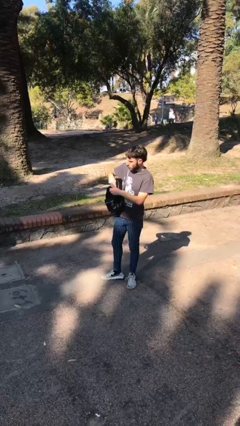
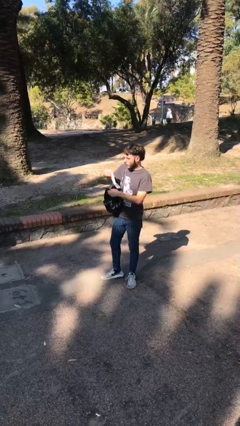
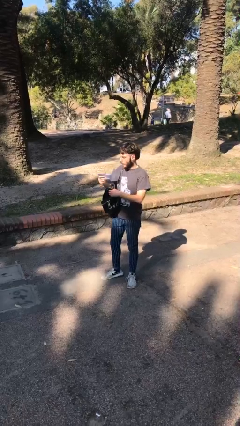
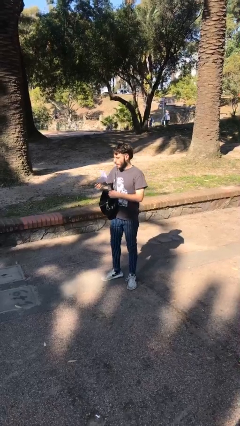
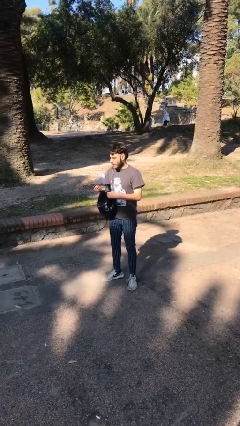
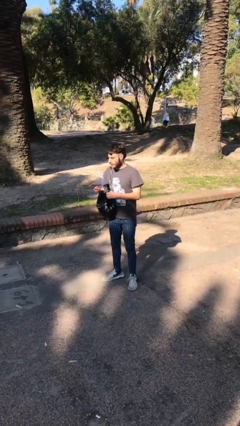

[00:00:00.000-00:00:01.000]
person takes object from backpack

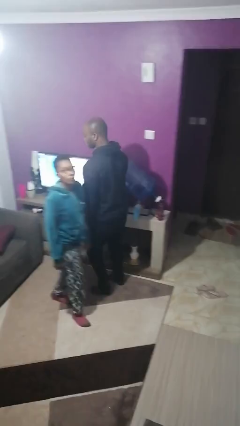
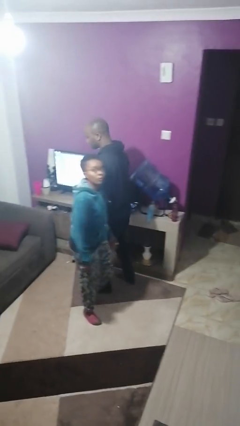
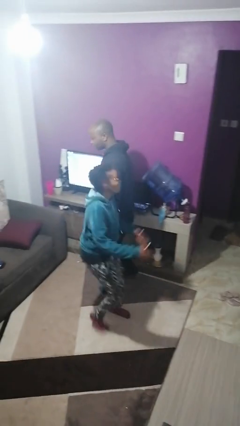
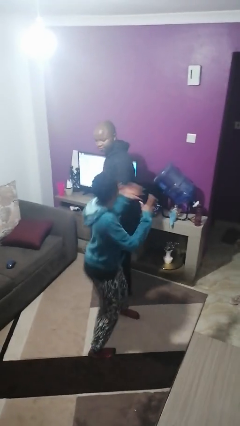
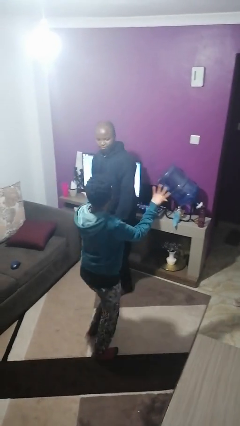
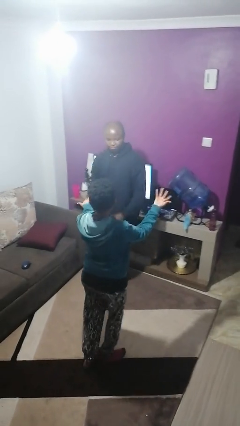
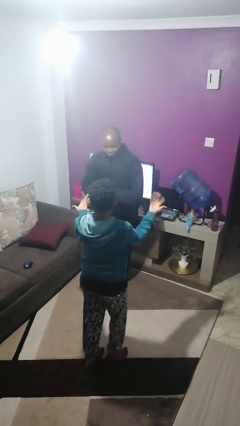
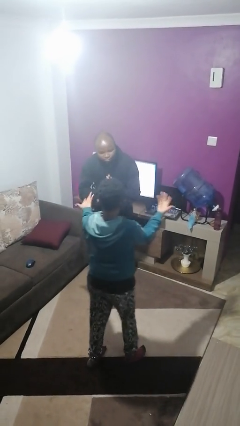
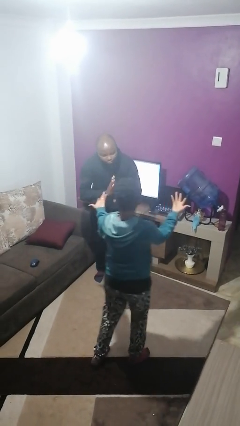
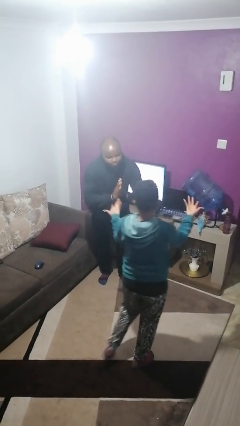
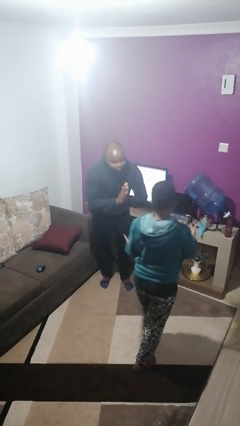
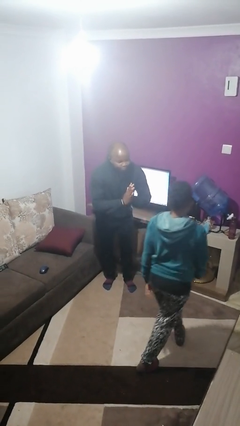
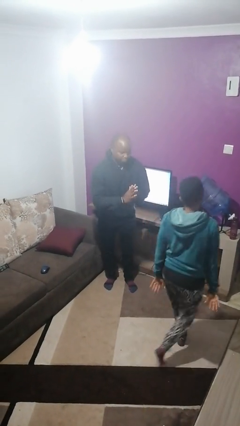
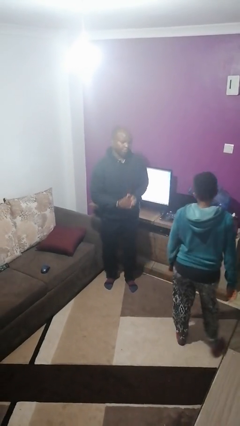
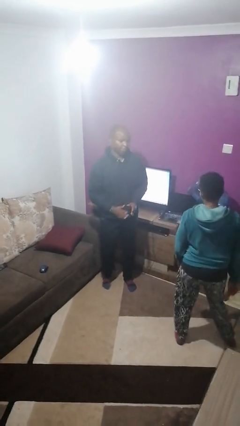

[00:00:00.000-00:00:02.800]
person bumps into person

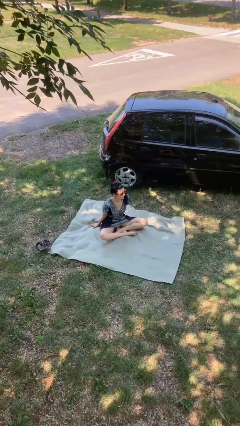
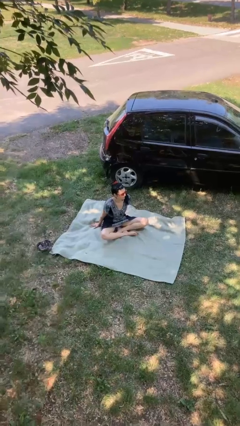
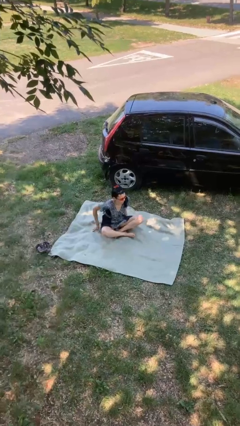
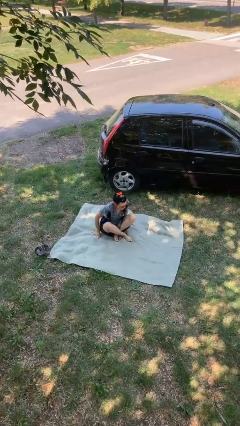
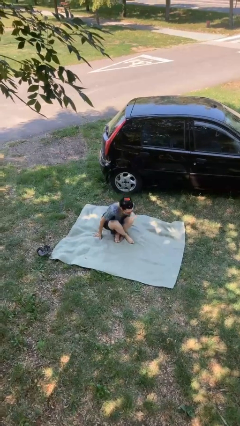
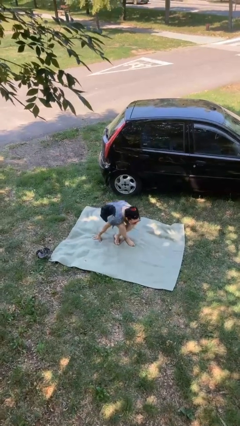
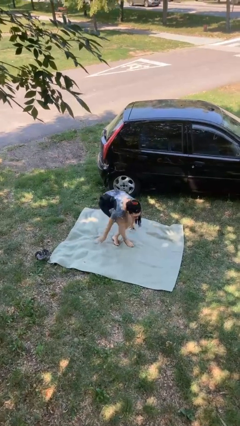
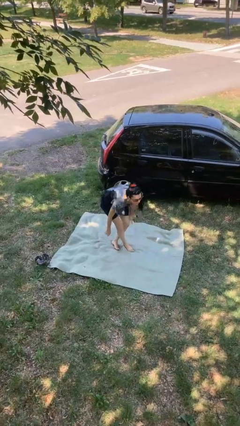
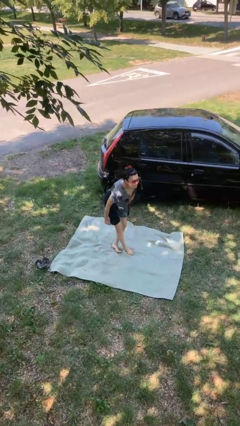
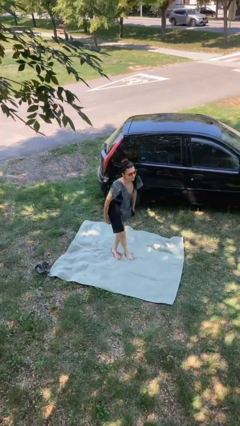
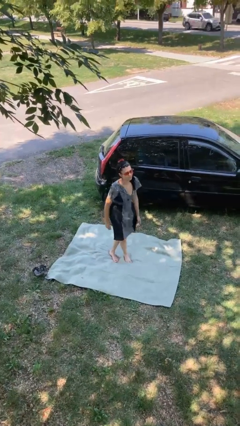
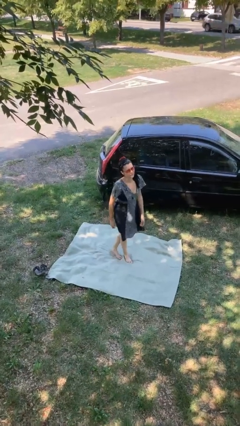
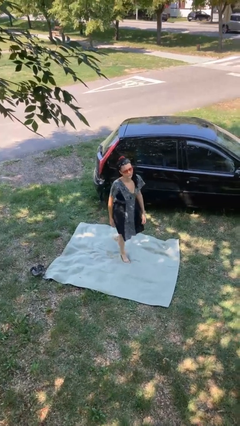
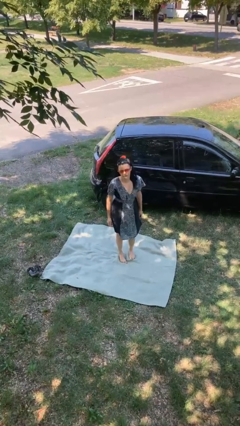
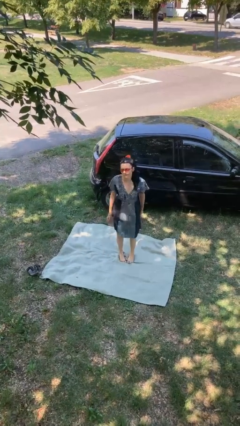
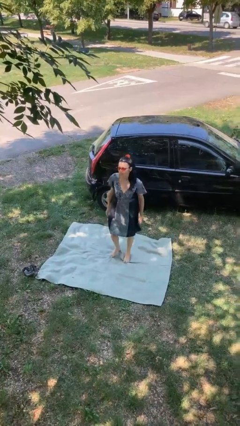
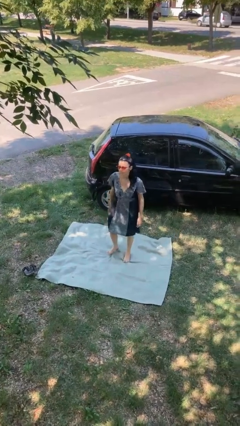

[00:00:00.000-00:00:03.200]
person stands up from floor

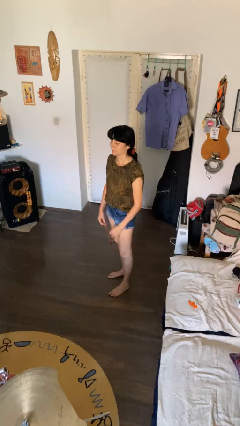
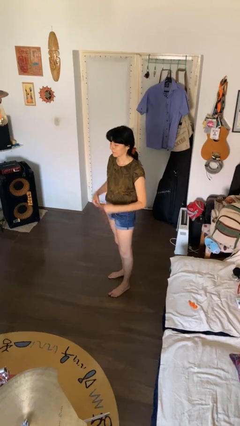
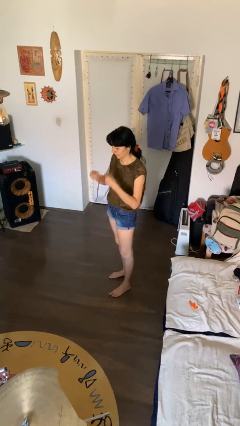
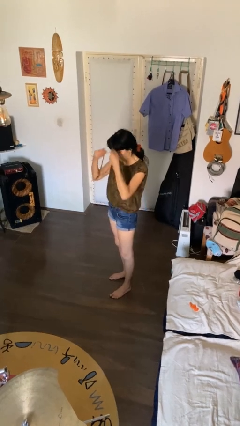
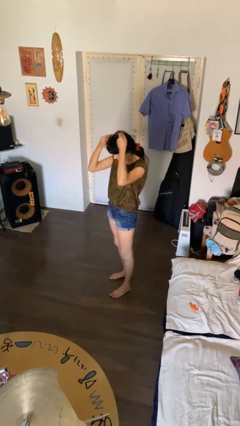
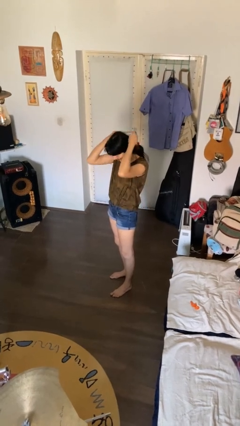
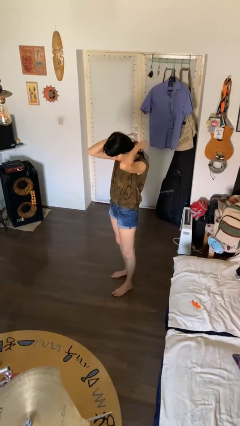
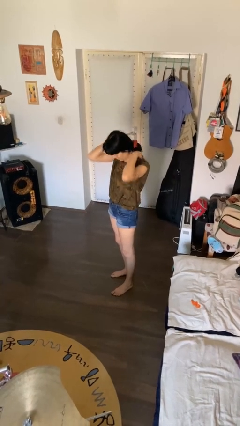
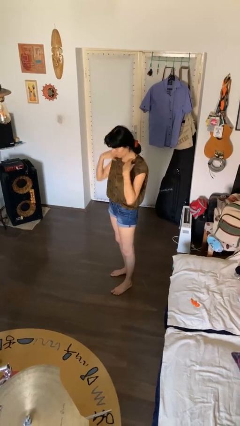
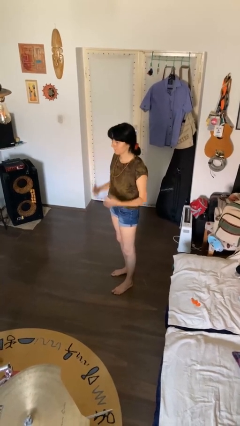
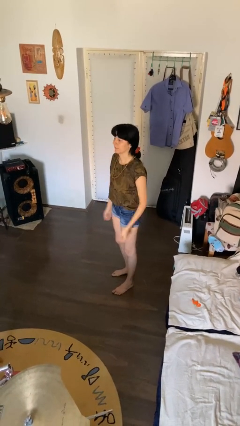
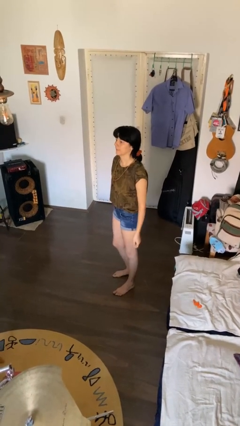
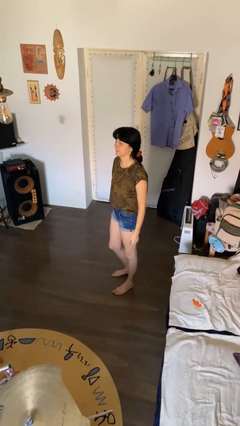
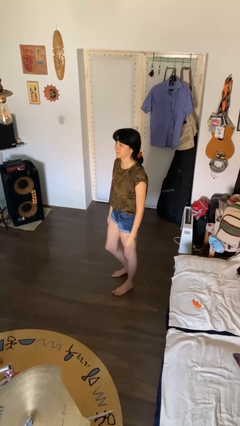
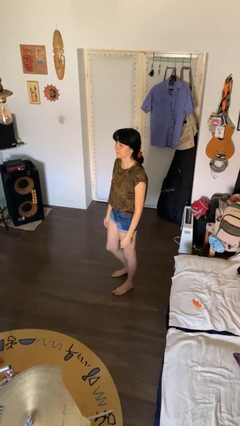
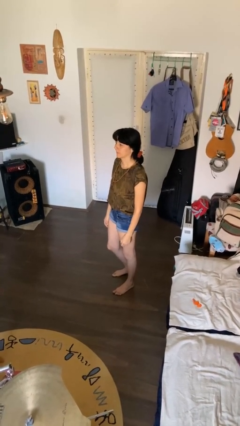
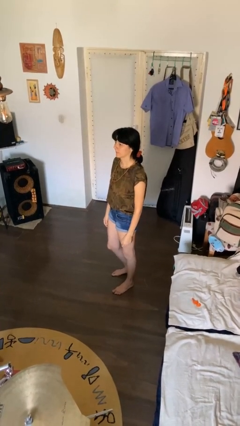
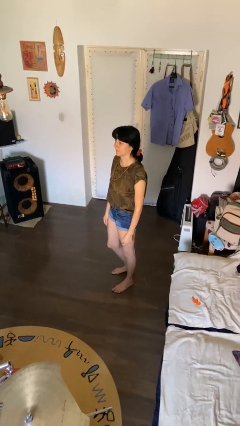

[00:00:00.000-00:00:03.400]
person puts on necklace

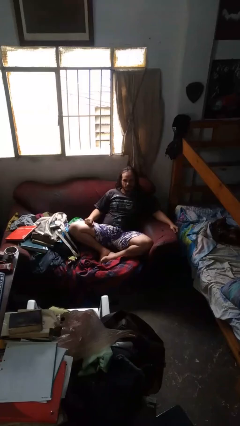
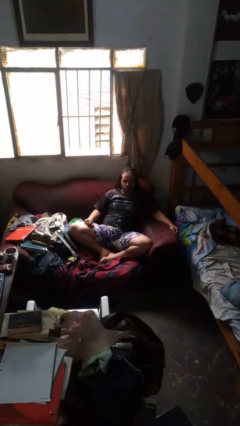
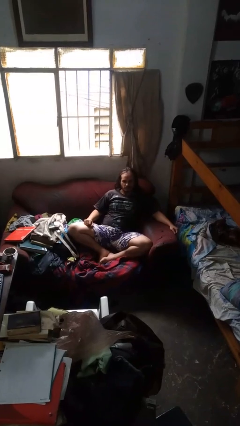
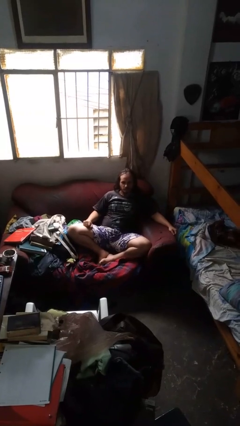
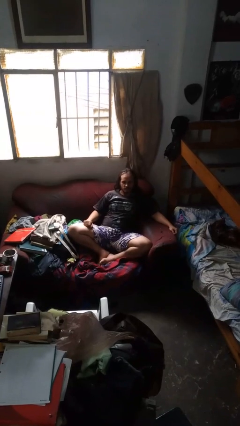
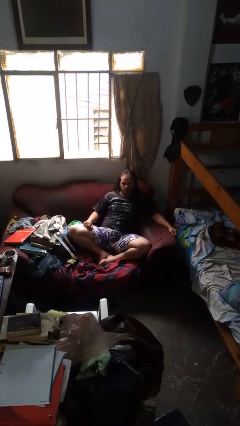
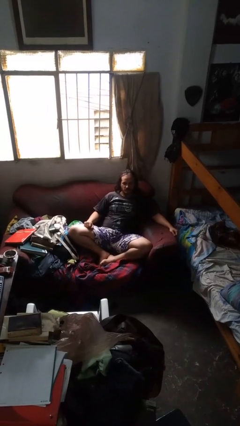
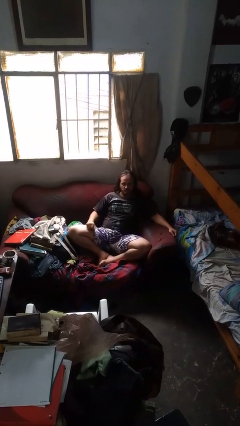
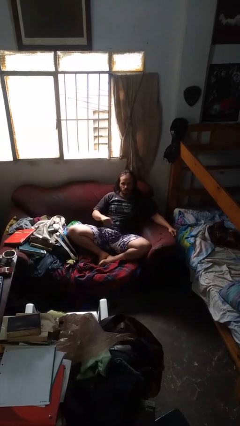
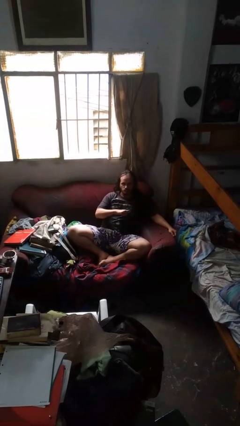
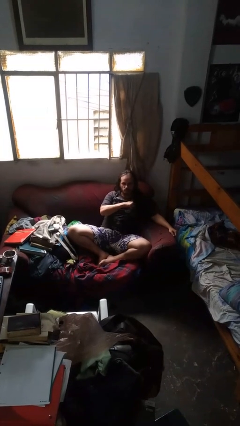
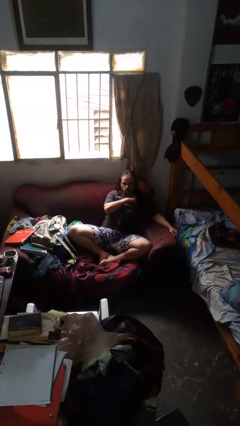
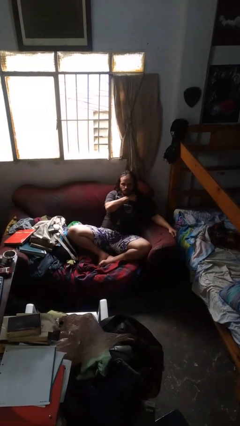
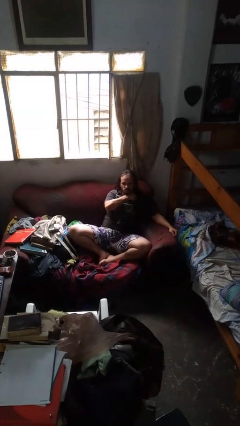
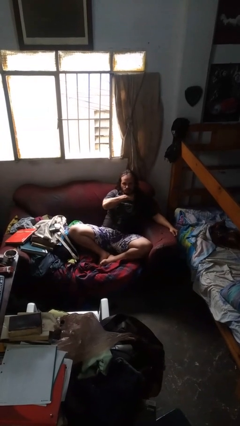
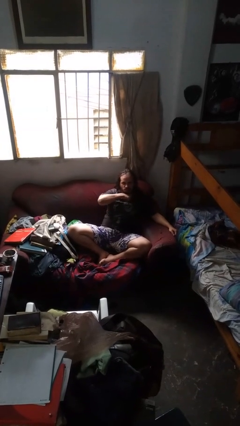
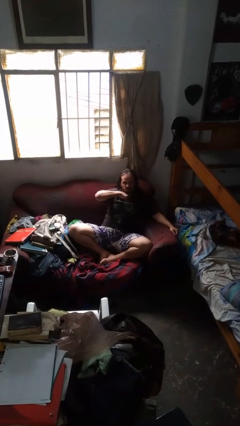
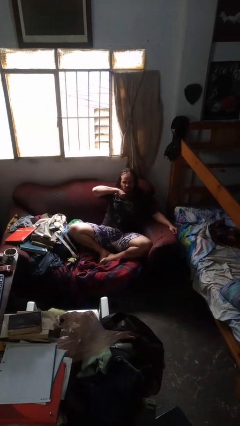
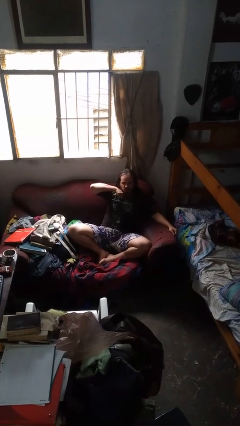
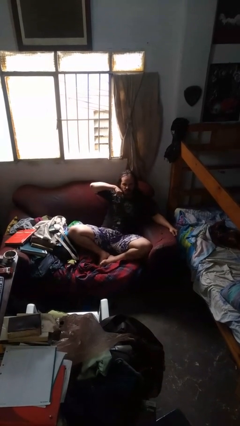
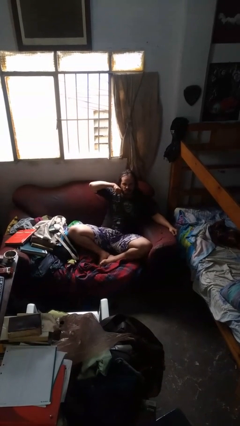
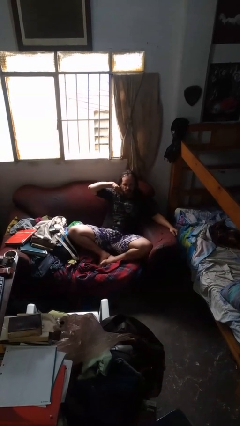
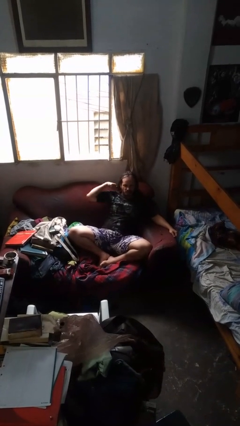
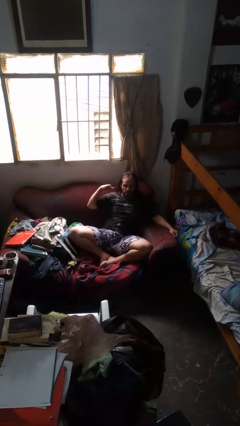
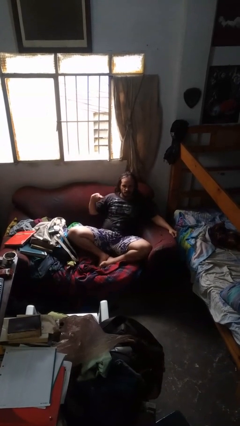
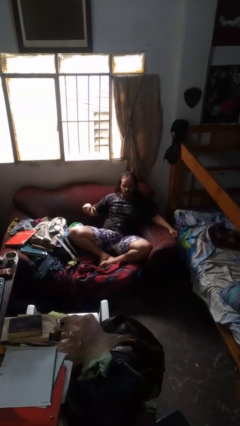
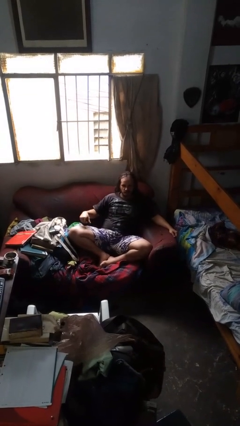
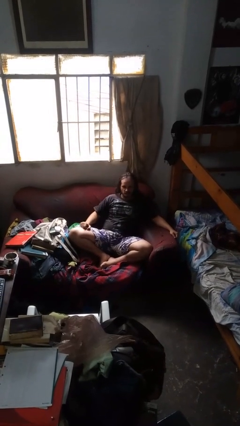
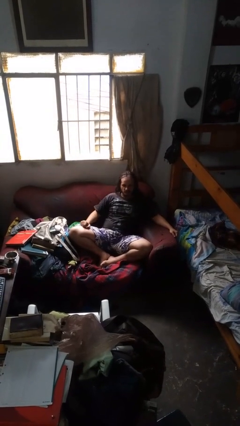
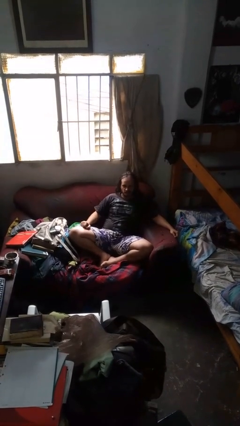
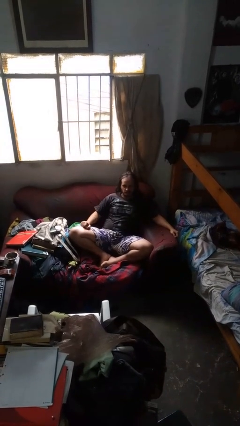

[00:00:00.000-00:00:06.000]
person gestures cut

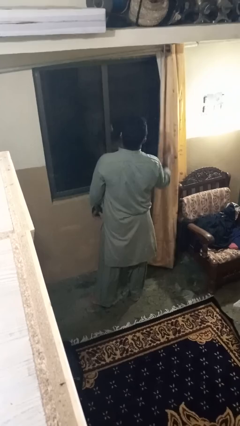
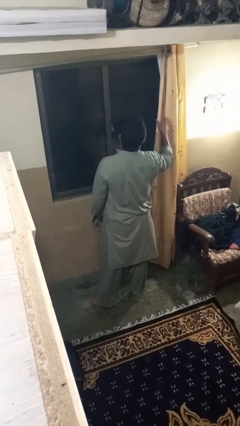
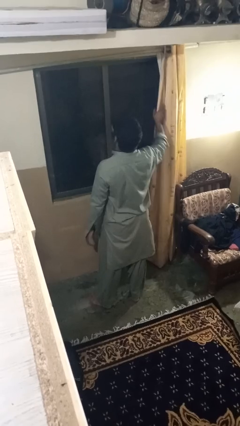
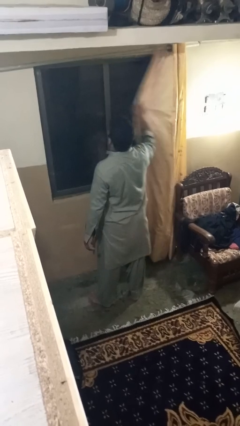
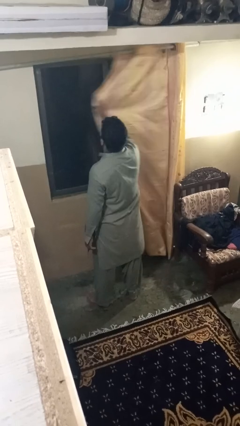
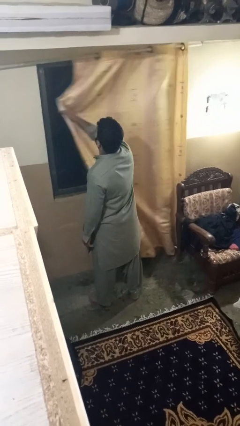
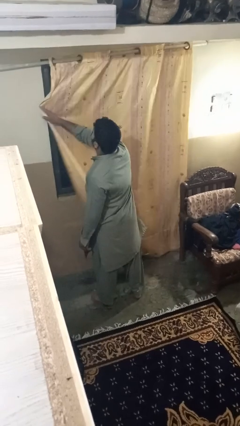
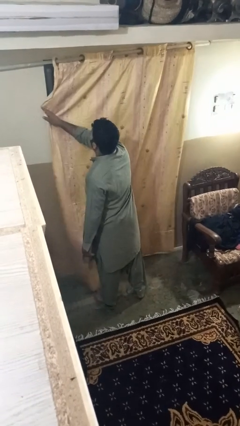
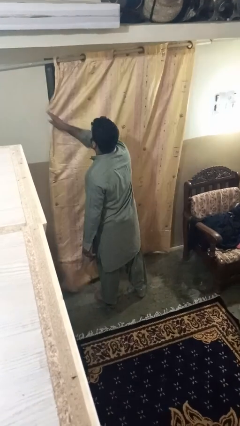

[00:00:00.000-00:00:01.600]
person closes curtains
